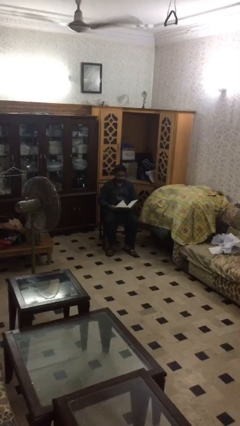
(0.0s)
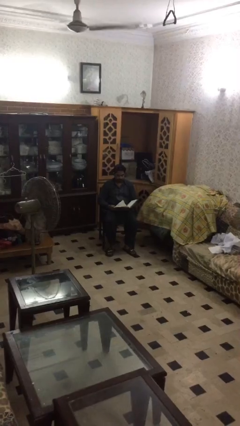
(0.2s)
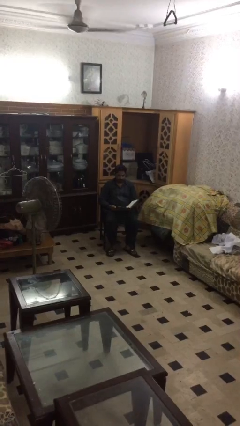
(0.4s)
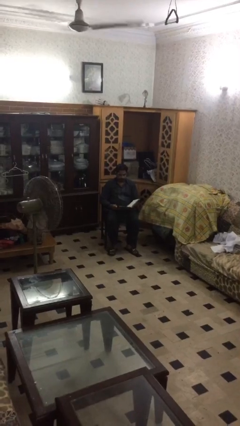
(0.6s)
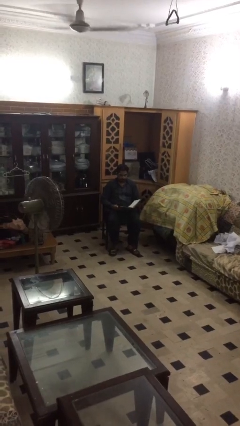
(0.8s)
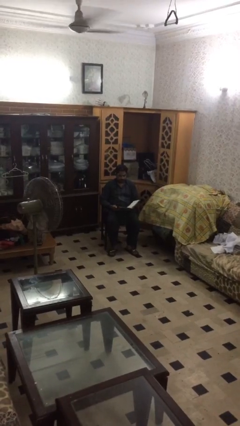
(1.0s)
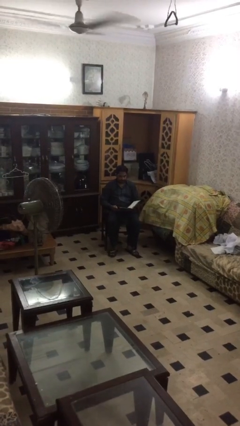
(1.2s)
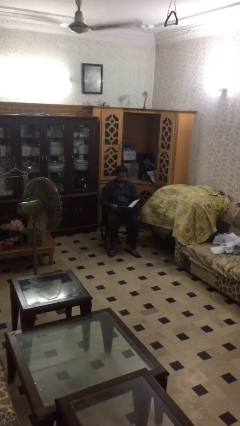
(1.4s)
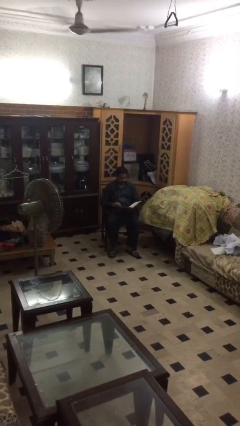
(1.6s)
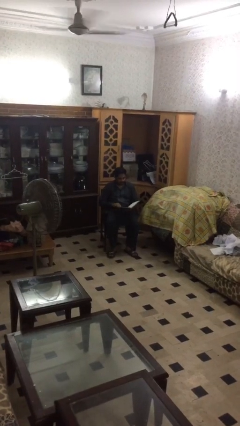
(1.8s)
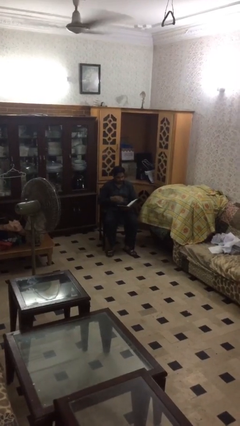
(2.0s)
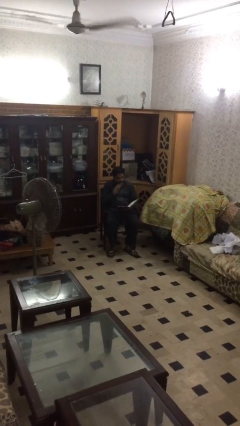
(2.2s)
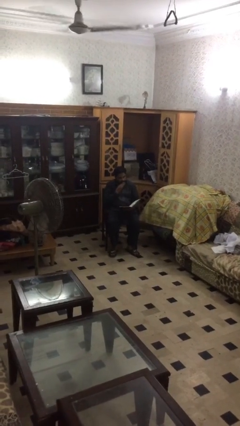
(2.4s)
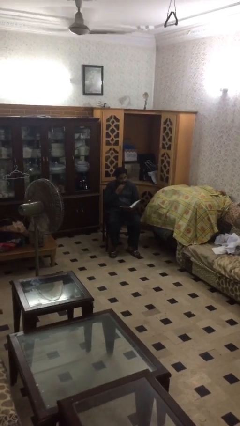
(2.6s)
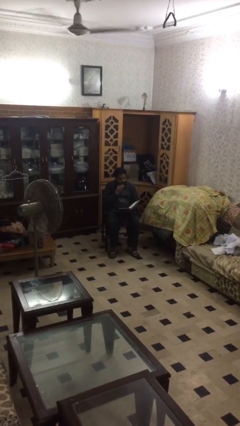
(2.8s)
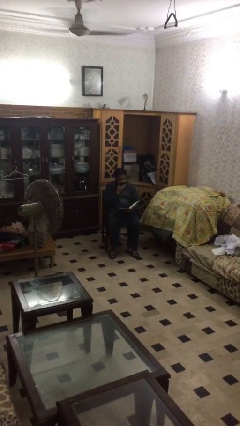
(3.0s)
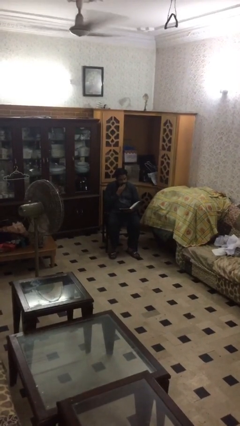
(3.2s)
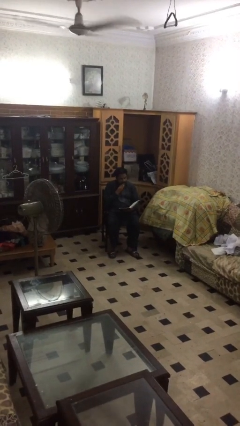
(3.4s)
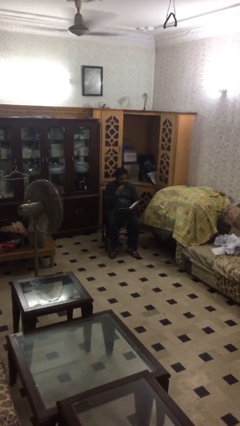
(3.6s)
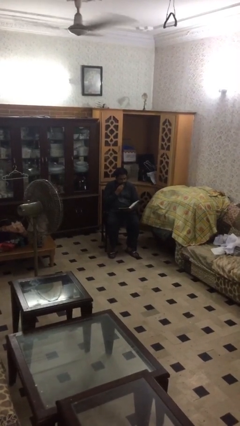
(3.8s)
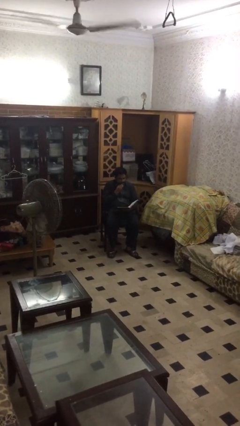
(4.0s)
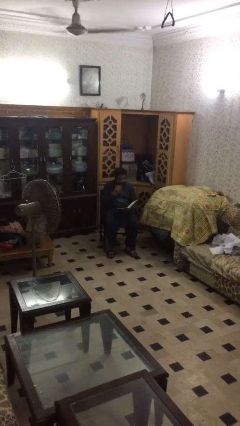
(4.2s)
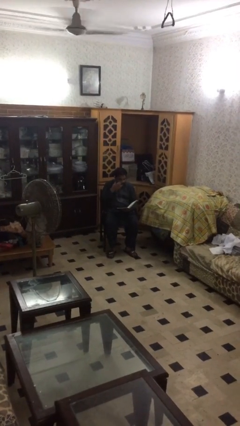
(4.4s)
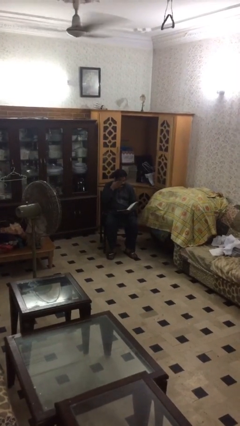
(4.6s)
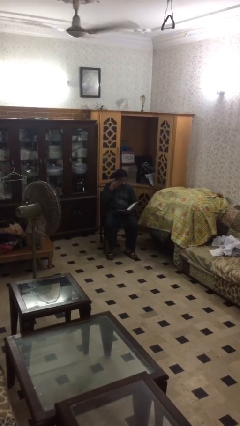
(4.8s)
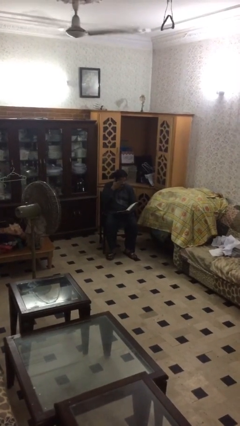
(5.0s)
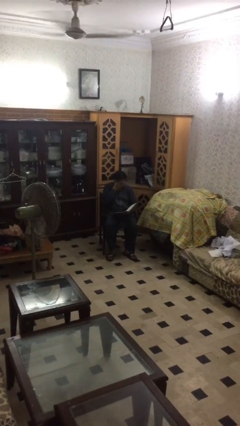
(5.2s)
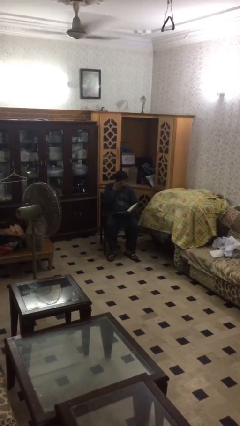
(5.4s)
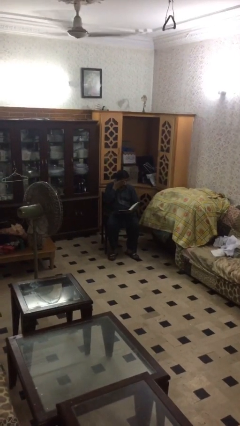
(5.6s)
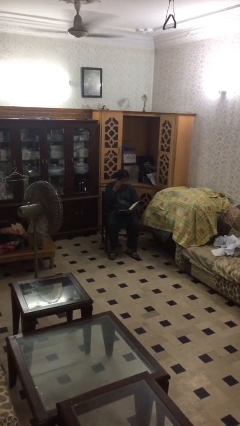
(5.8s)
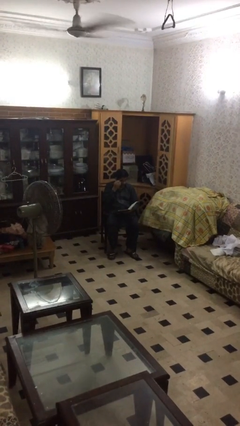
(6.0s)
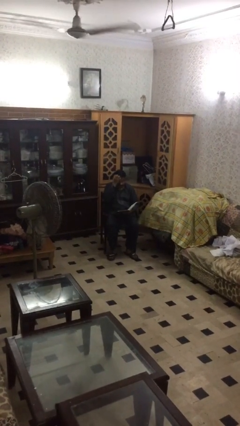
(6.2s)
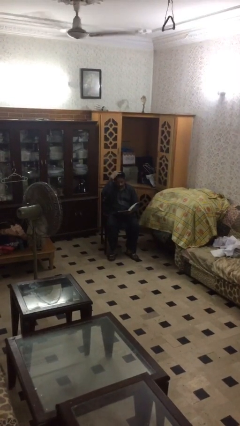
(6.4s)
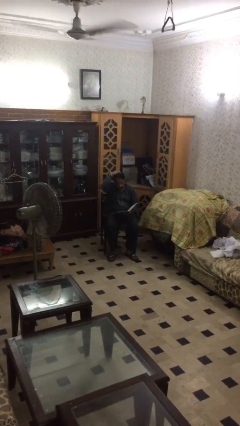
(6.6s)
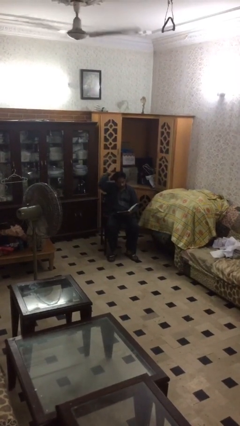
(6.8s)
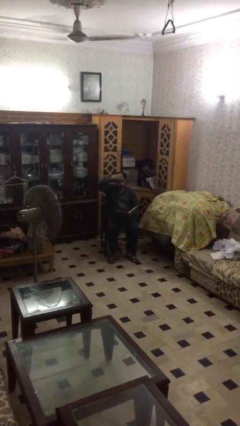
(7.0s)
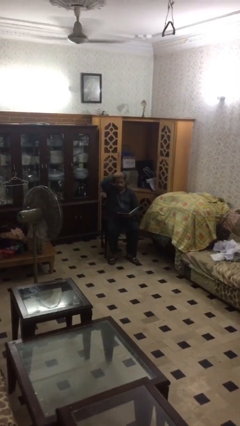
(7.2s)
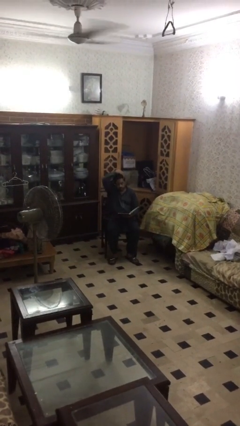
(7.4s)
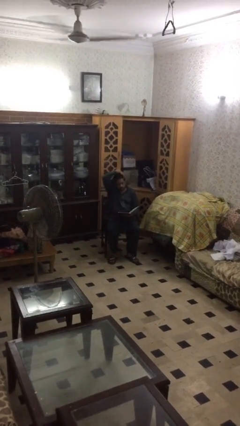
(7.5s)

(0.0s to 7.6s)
person reads document

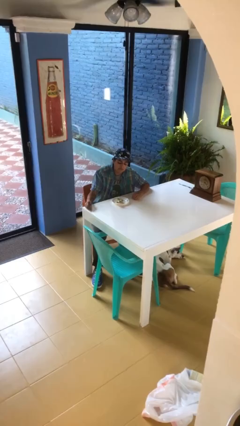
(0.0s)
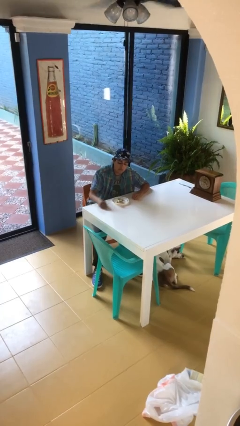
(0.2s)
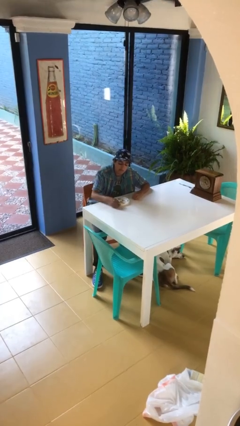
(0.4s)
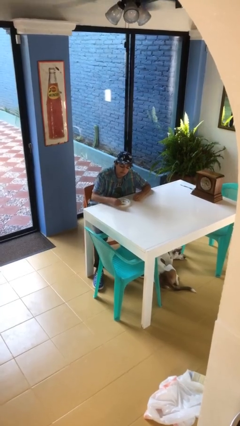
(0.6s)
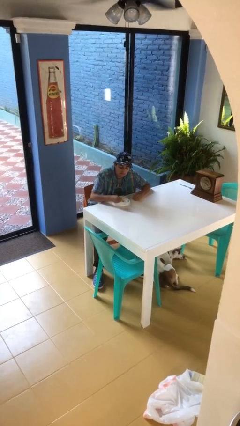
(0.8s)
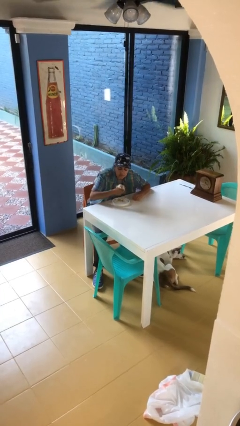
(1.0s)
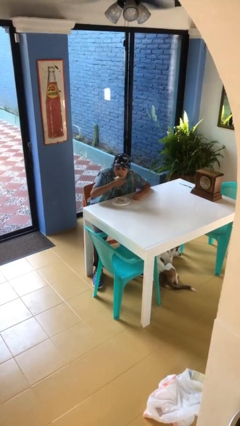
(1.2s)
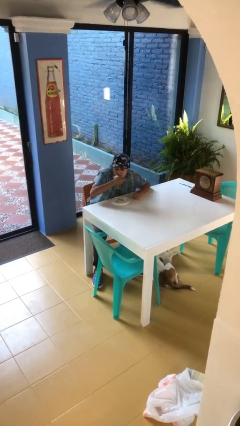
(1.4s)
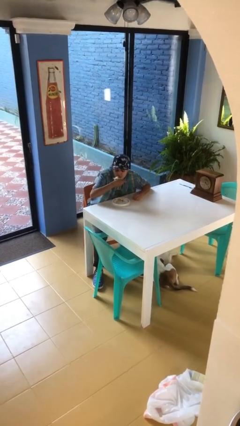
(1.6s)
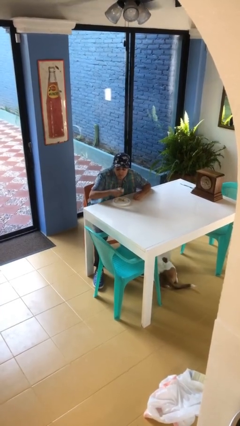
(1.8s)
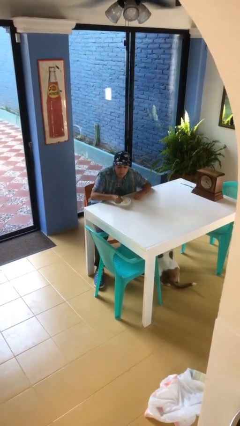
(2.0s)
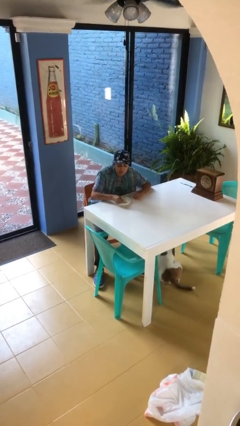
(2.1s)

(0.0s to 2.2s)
person eats with hands

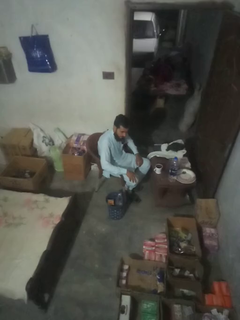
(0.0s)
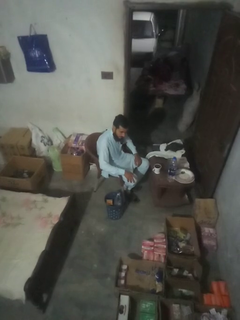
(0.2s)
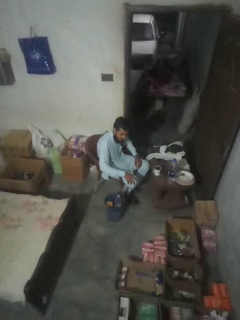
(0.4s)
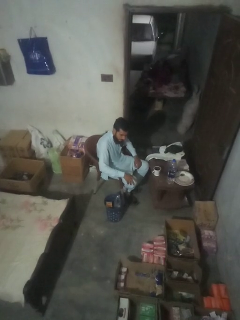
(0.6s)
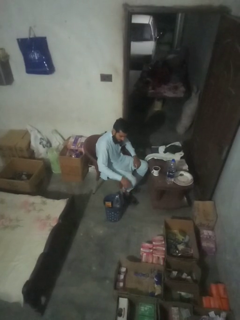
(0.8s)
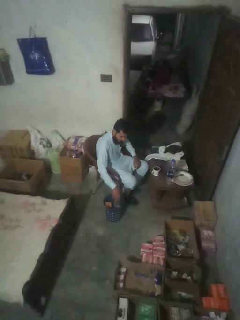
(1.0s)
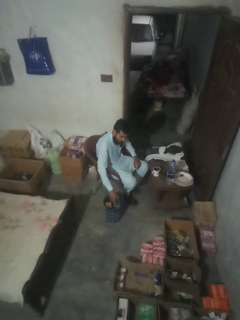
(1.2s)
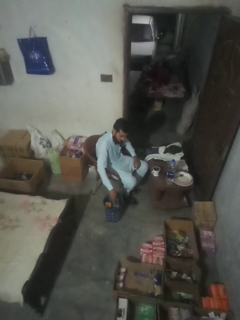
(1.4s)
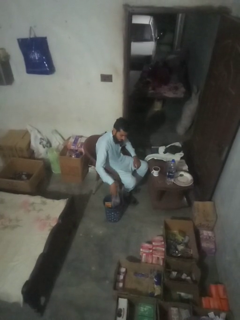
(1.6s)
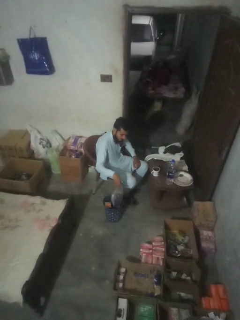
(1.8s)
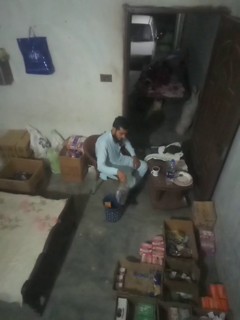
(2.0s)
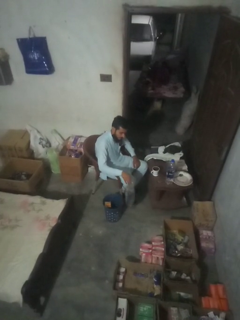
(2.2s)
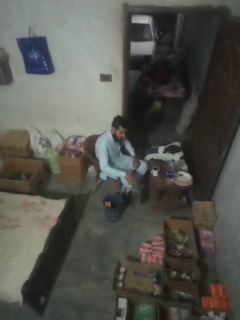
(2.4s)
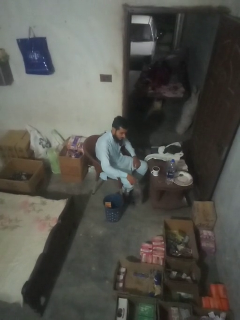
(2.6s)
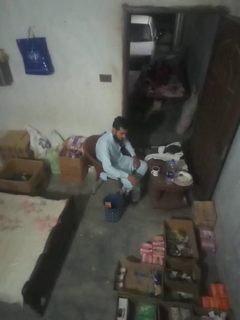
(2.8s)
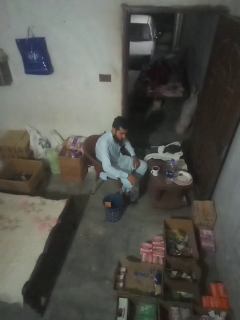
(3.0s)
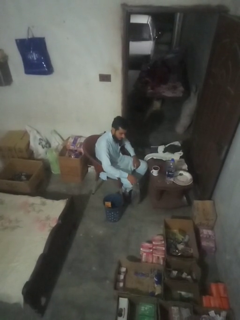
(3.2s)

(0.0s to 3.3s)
person inserts trashbag into trashcan

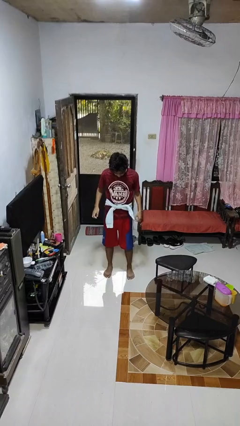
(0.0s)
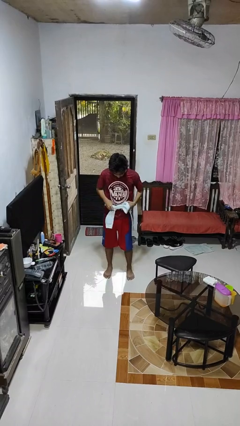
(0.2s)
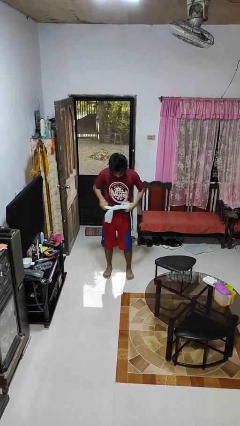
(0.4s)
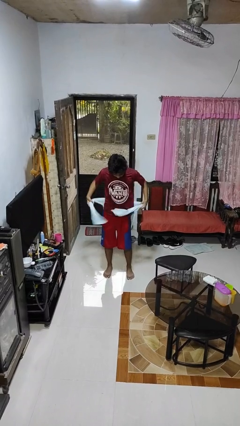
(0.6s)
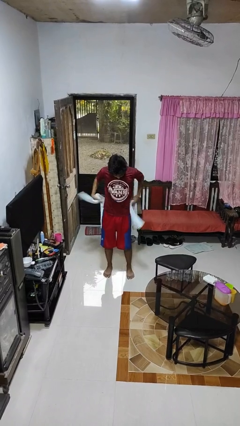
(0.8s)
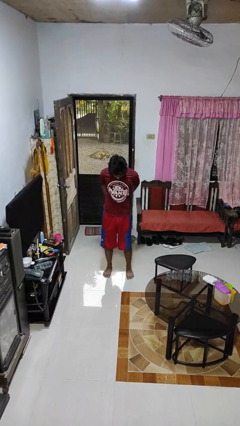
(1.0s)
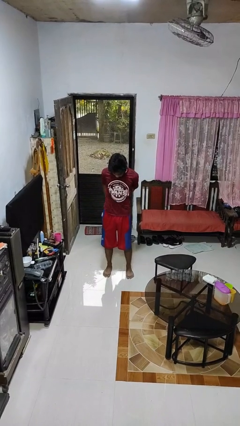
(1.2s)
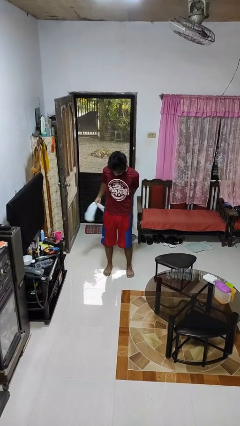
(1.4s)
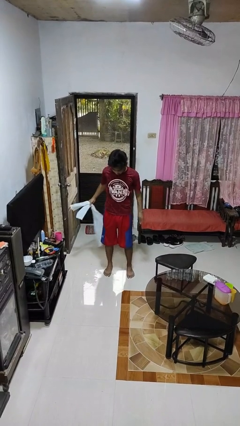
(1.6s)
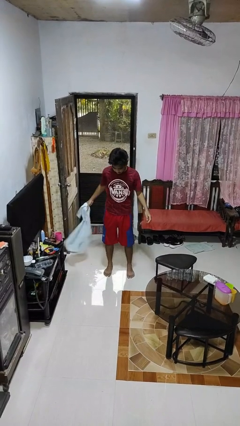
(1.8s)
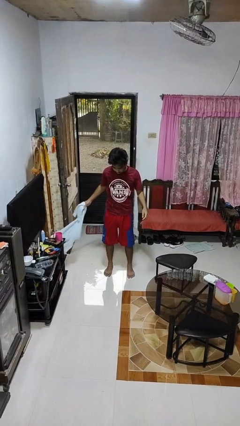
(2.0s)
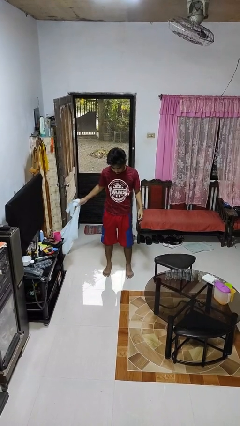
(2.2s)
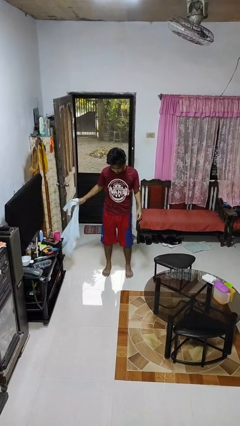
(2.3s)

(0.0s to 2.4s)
person unties jacket around waist

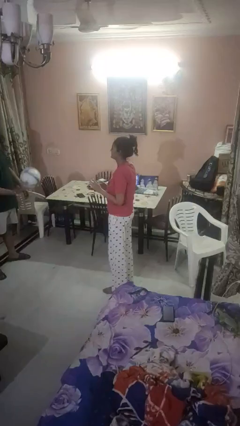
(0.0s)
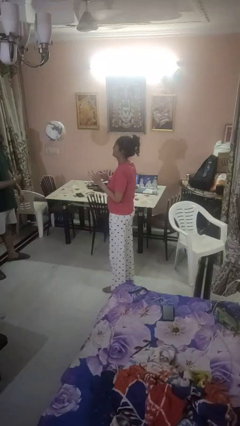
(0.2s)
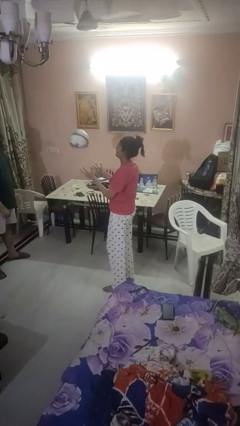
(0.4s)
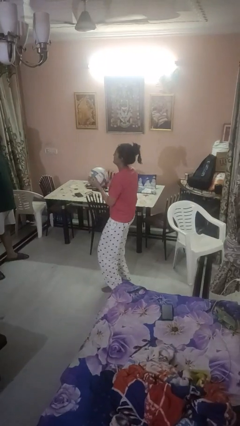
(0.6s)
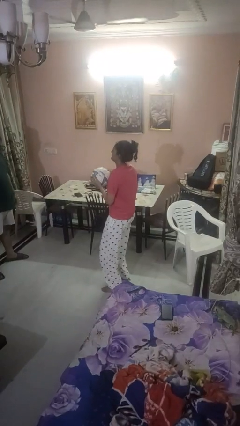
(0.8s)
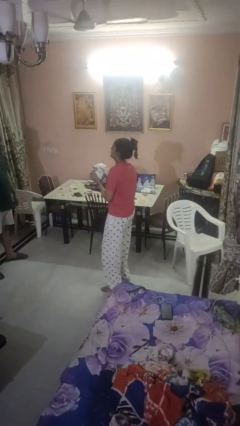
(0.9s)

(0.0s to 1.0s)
person catches object from person

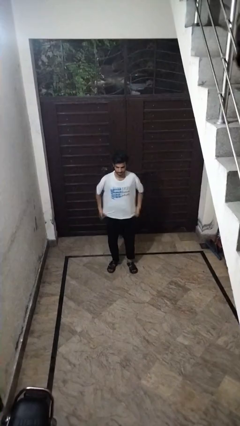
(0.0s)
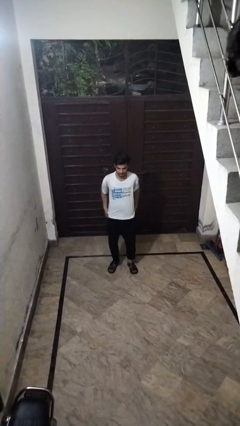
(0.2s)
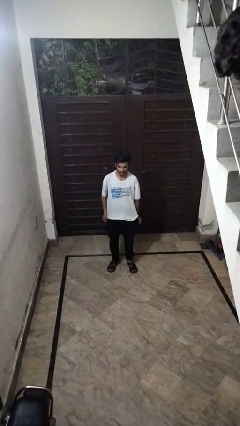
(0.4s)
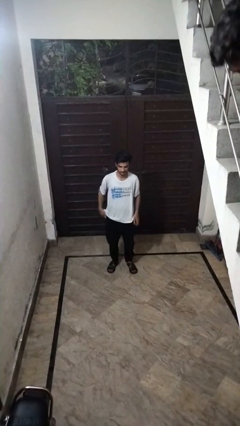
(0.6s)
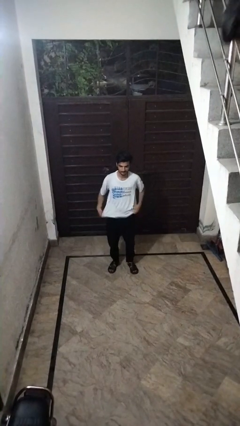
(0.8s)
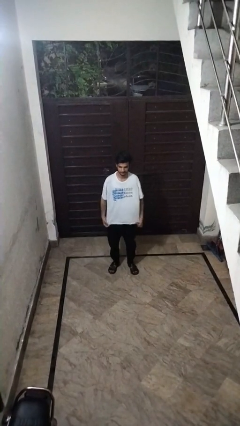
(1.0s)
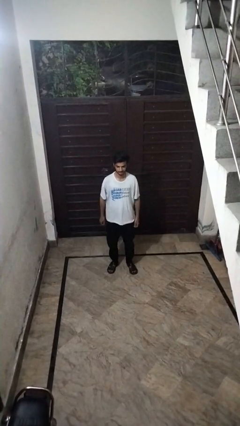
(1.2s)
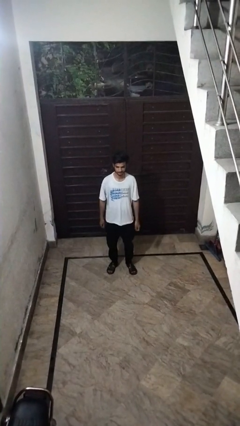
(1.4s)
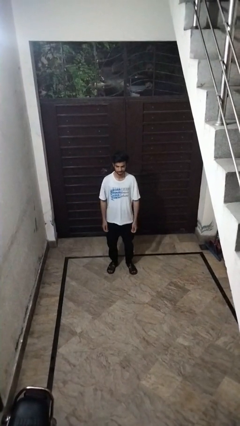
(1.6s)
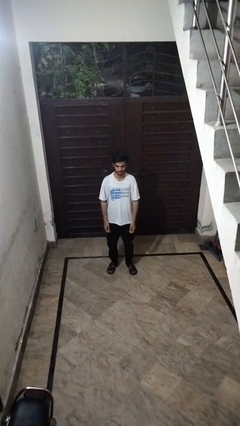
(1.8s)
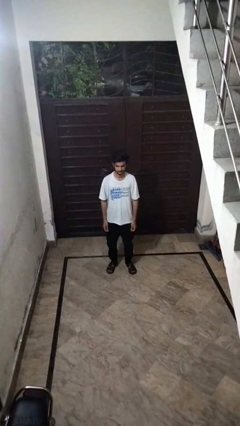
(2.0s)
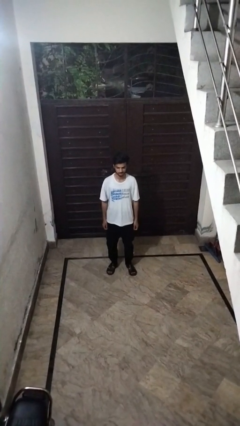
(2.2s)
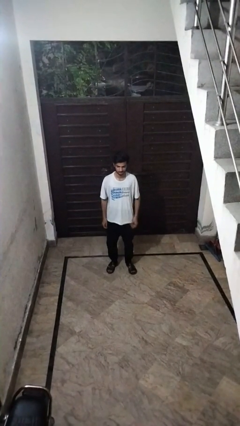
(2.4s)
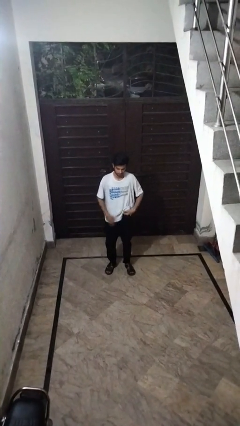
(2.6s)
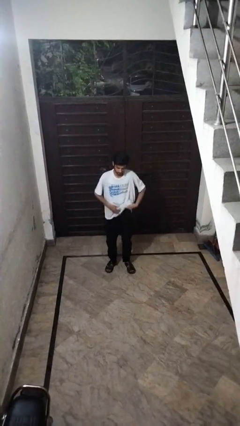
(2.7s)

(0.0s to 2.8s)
person closes facility door
